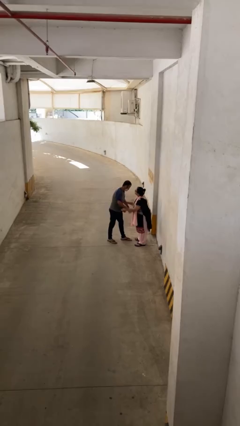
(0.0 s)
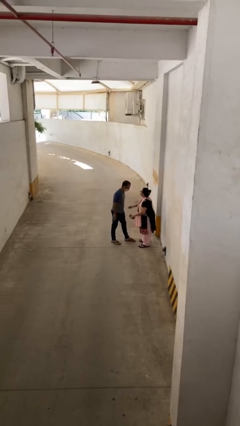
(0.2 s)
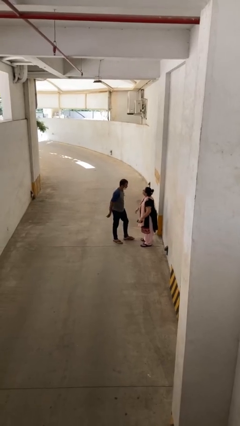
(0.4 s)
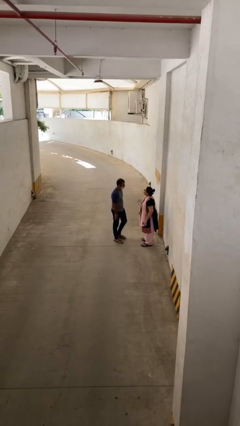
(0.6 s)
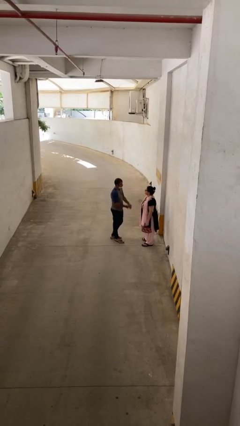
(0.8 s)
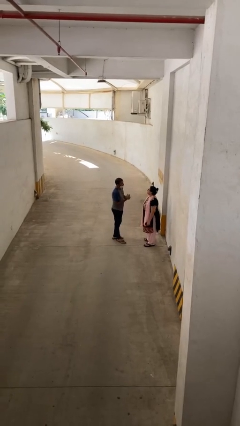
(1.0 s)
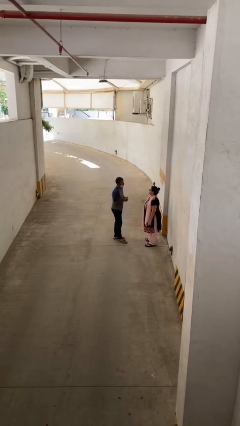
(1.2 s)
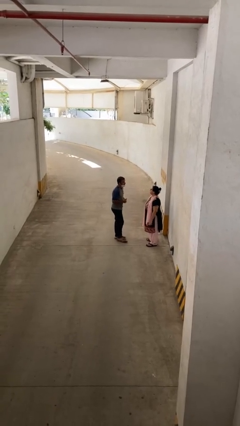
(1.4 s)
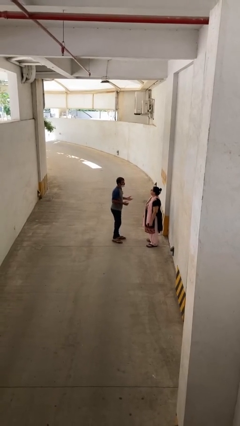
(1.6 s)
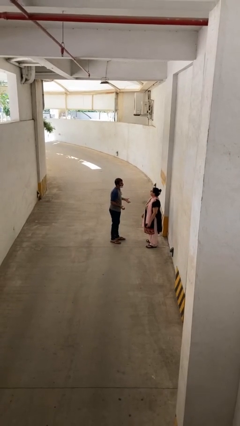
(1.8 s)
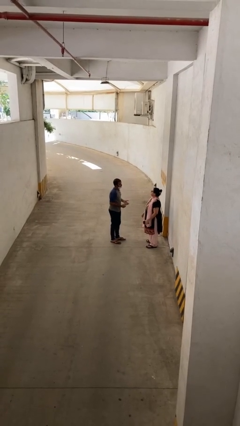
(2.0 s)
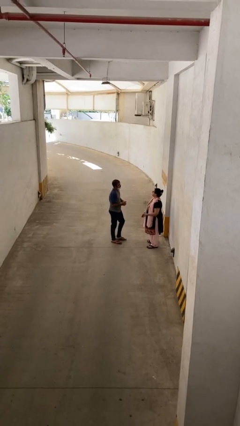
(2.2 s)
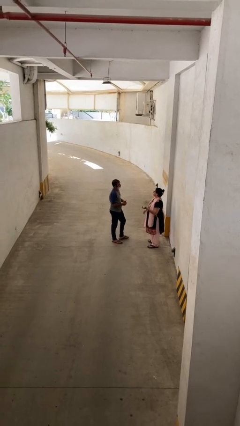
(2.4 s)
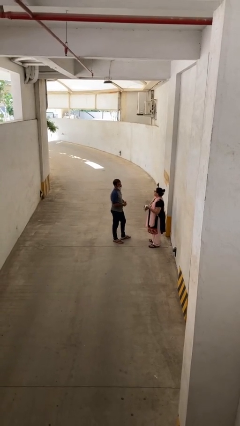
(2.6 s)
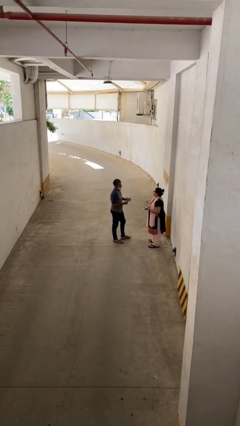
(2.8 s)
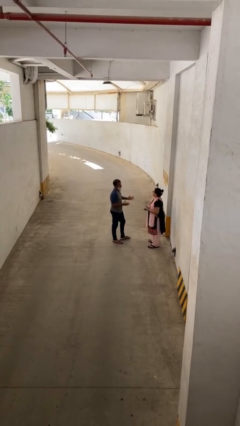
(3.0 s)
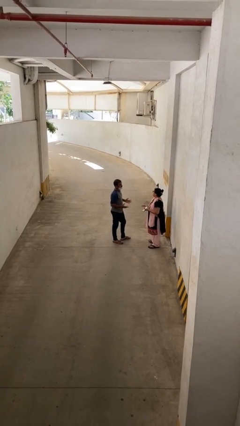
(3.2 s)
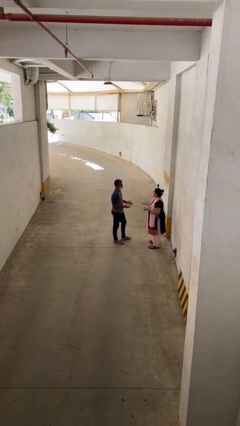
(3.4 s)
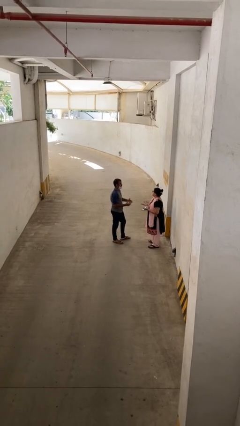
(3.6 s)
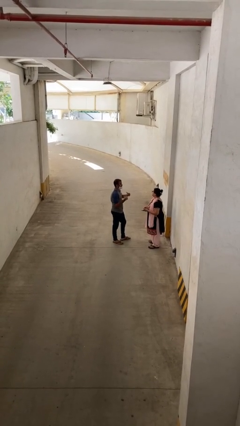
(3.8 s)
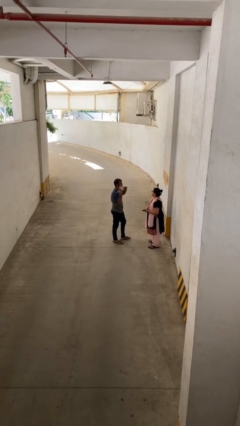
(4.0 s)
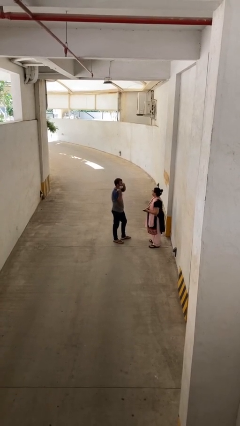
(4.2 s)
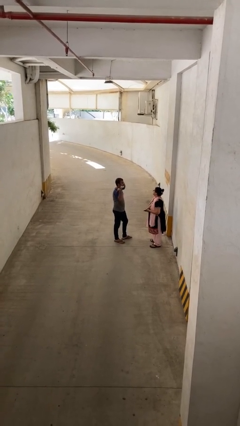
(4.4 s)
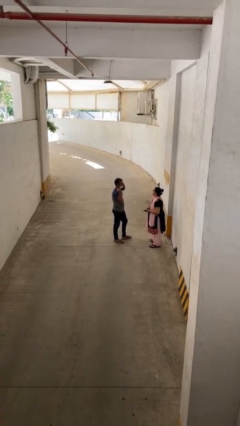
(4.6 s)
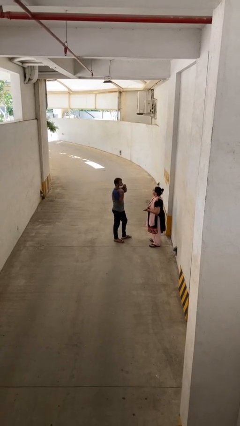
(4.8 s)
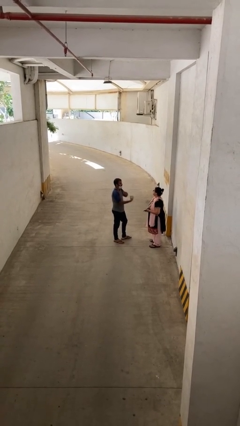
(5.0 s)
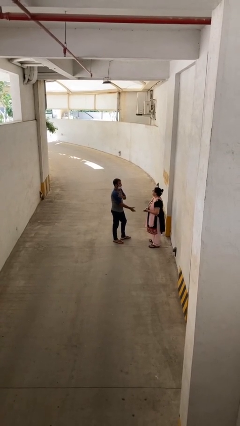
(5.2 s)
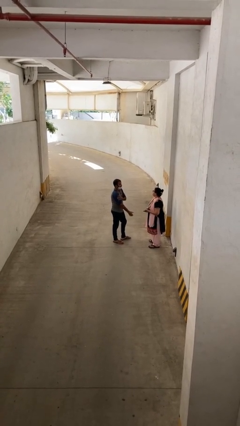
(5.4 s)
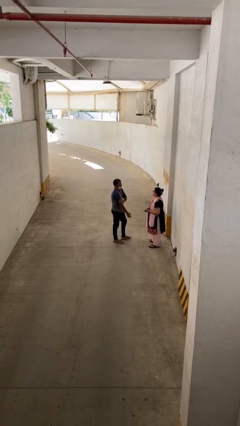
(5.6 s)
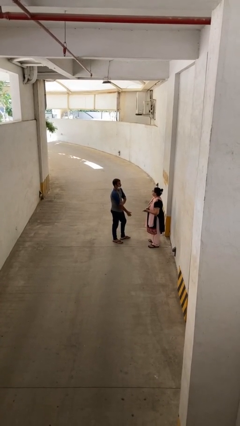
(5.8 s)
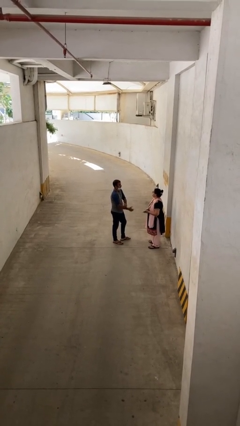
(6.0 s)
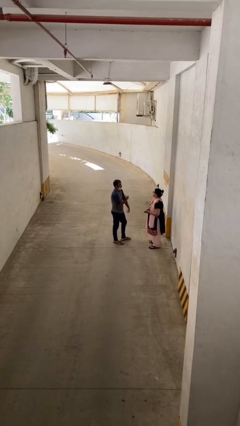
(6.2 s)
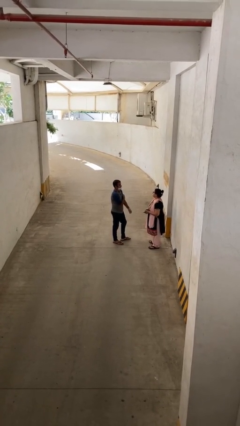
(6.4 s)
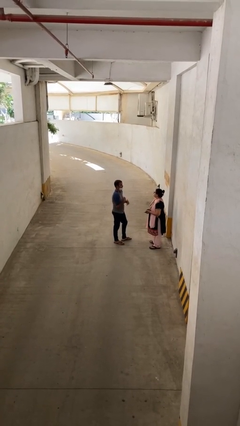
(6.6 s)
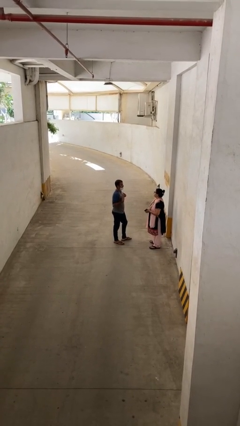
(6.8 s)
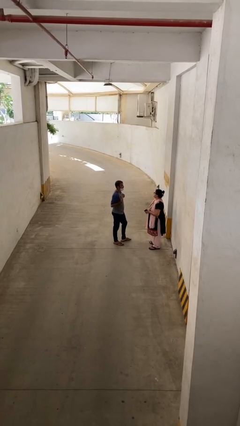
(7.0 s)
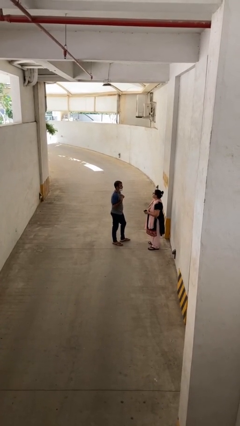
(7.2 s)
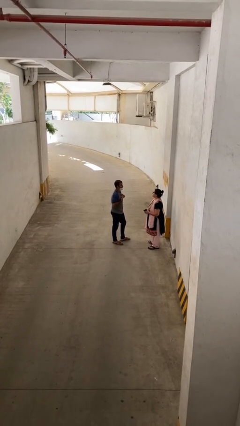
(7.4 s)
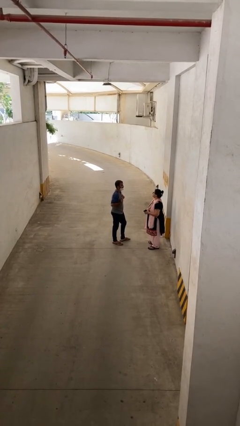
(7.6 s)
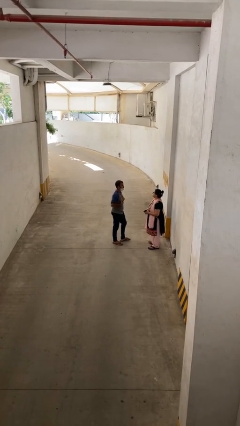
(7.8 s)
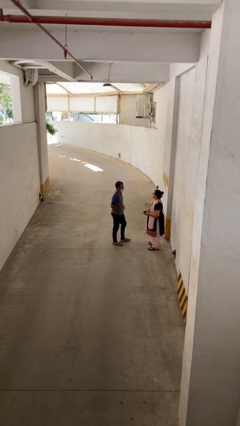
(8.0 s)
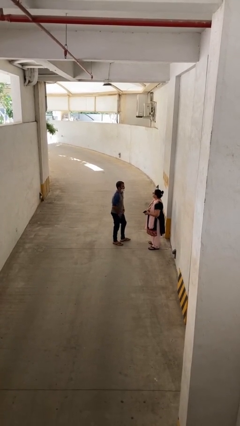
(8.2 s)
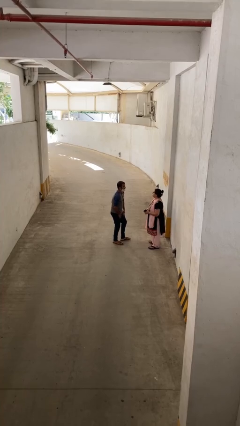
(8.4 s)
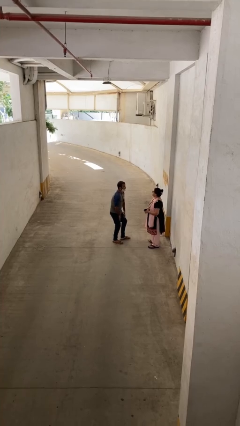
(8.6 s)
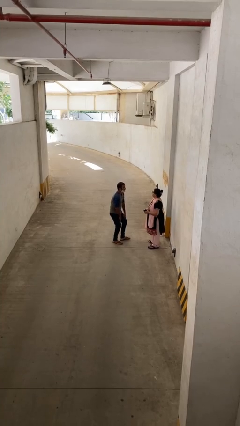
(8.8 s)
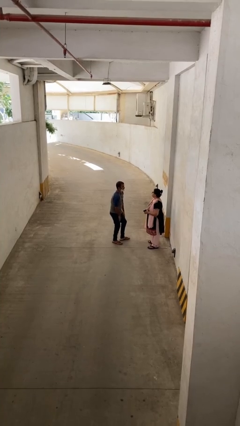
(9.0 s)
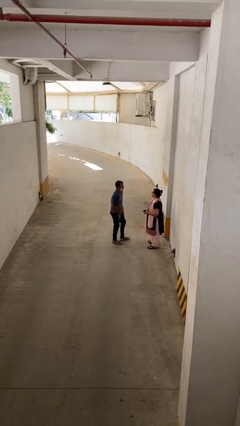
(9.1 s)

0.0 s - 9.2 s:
person talks to person

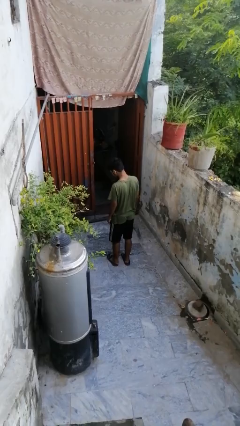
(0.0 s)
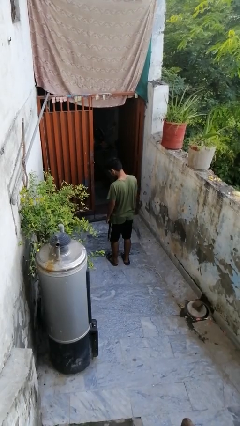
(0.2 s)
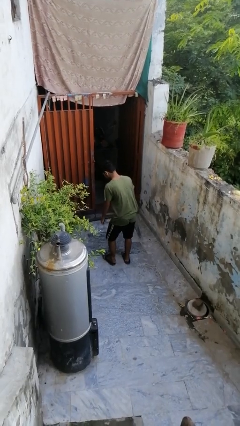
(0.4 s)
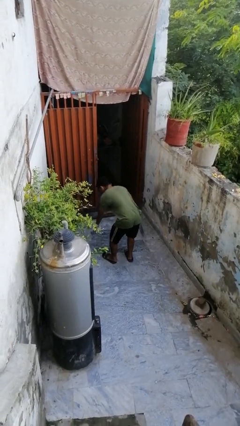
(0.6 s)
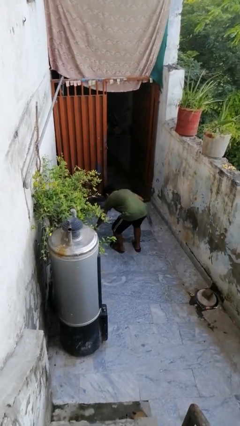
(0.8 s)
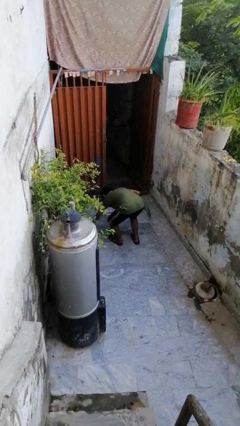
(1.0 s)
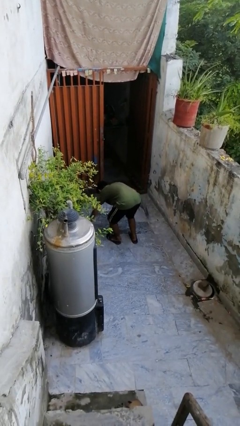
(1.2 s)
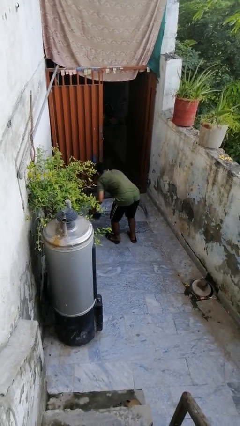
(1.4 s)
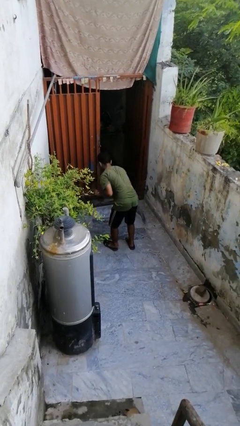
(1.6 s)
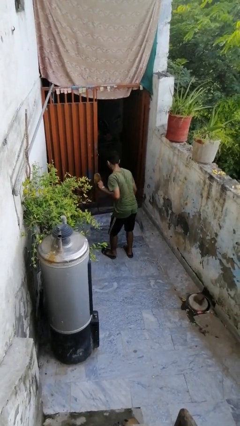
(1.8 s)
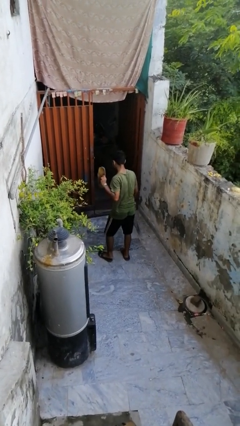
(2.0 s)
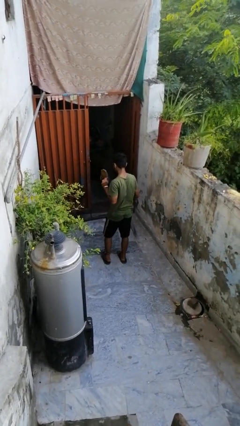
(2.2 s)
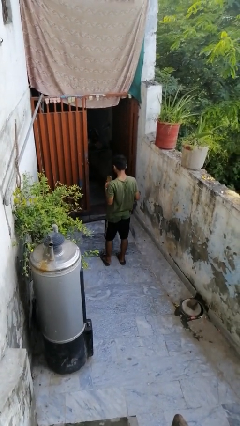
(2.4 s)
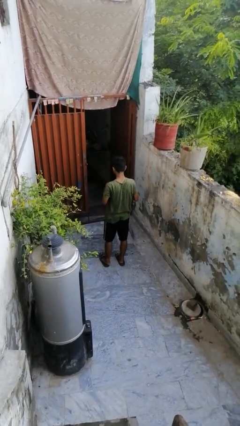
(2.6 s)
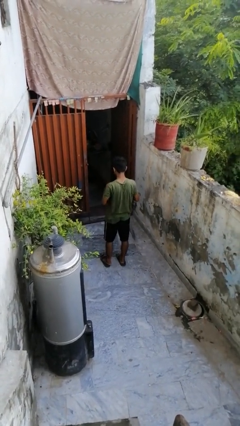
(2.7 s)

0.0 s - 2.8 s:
person picks up object from floor

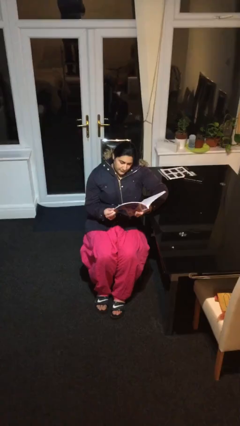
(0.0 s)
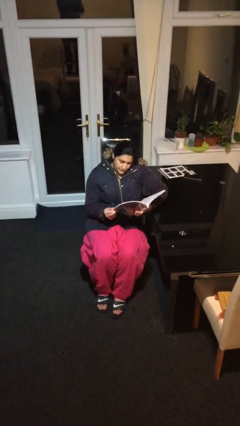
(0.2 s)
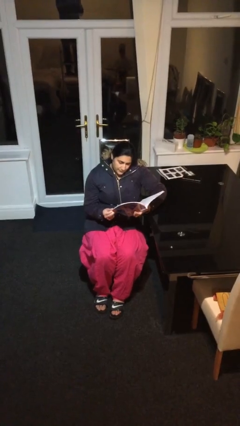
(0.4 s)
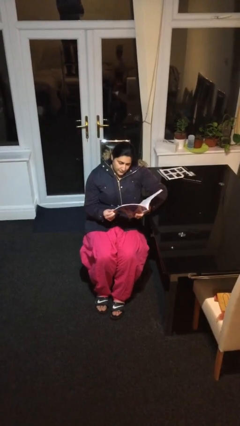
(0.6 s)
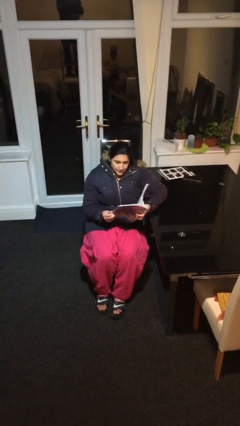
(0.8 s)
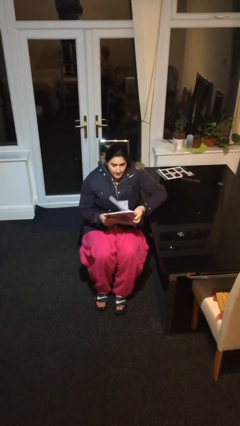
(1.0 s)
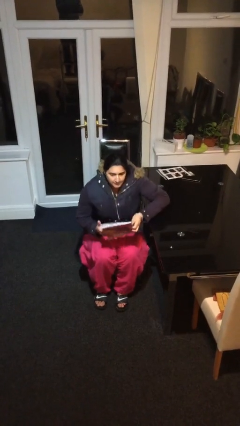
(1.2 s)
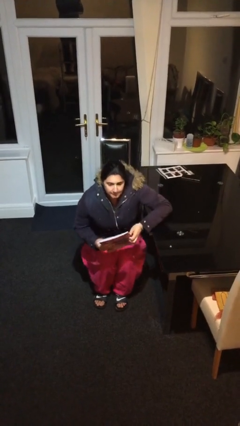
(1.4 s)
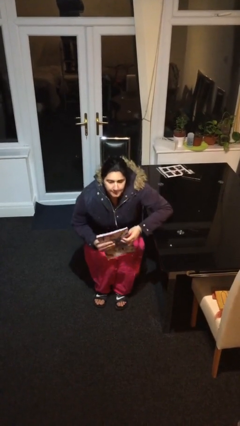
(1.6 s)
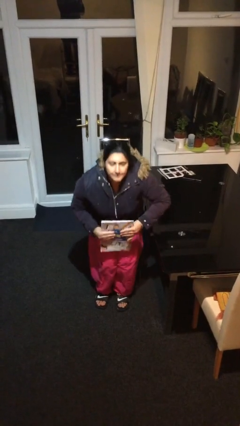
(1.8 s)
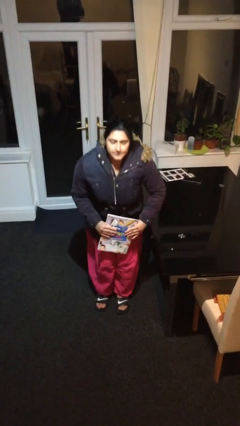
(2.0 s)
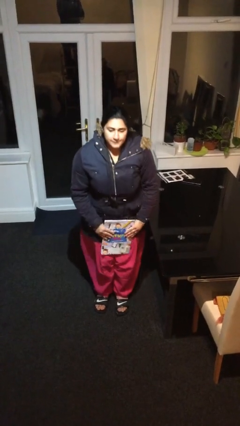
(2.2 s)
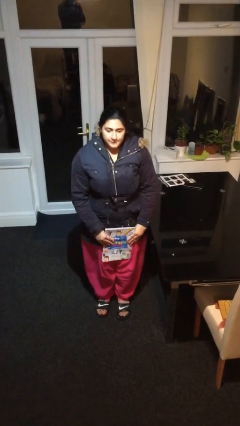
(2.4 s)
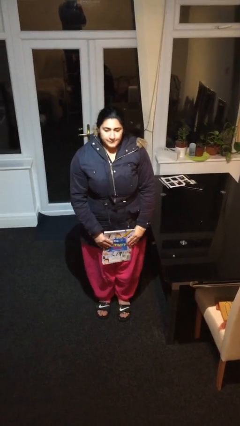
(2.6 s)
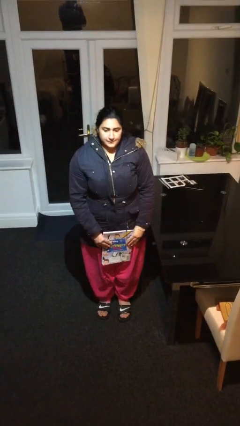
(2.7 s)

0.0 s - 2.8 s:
person stands up

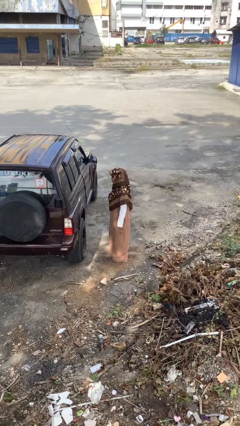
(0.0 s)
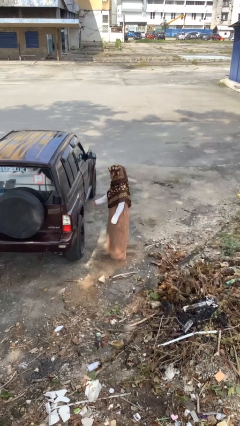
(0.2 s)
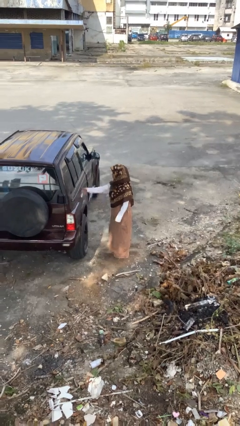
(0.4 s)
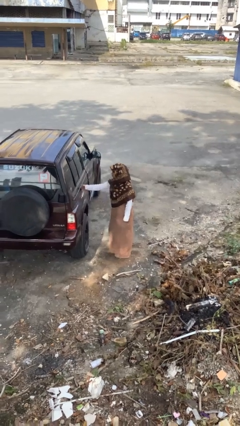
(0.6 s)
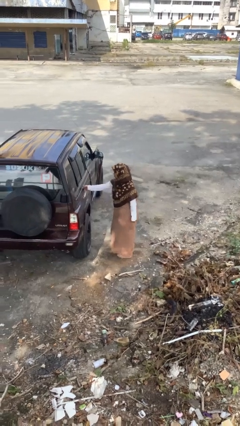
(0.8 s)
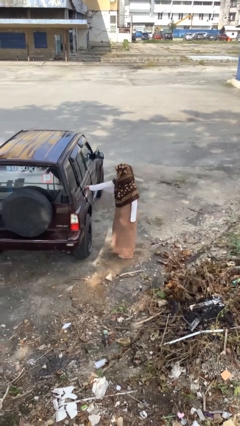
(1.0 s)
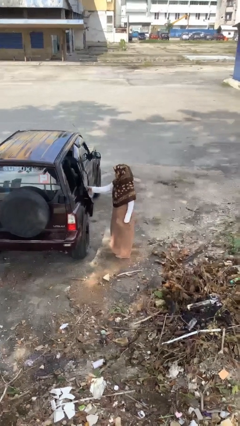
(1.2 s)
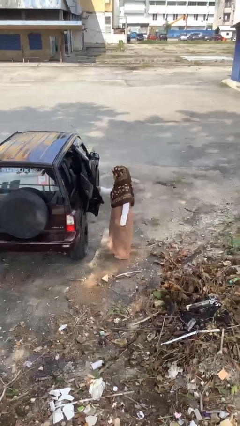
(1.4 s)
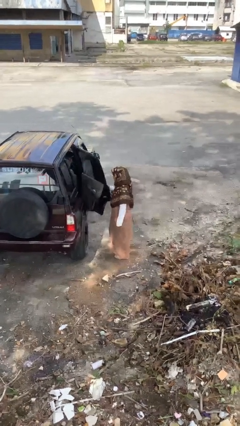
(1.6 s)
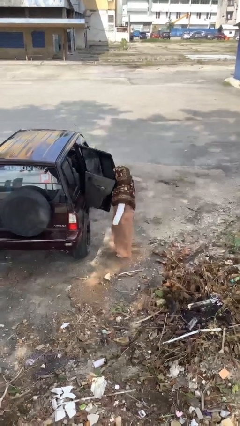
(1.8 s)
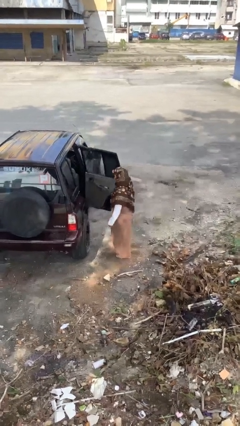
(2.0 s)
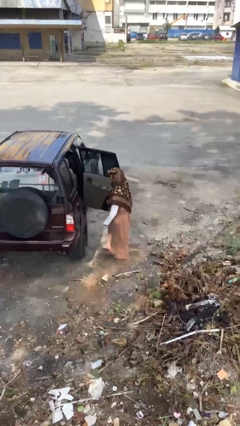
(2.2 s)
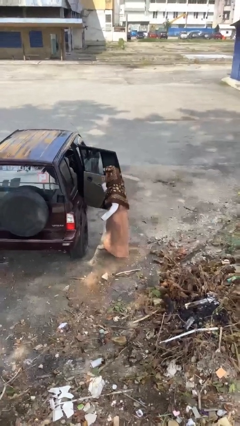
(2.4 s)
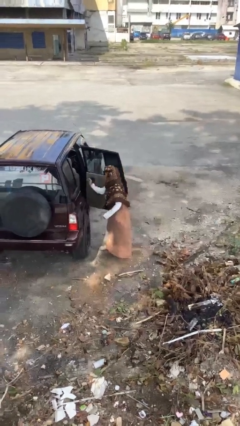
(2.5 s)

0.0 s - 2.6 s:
person opens car door

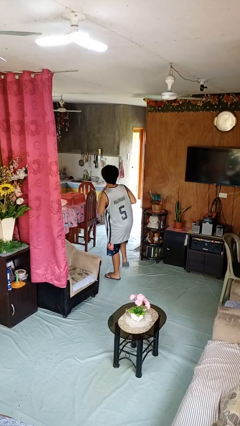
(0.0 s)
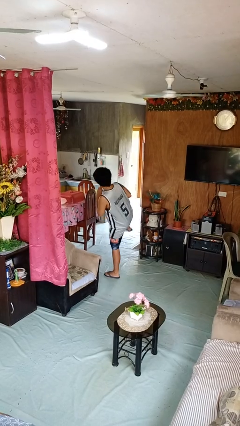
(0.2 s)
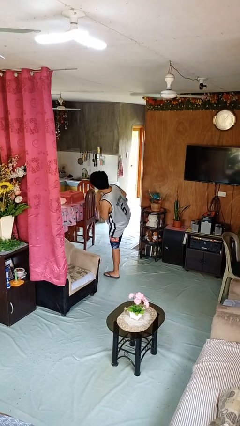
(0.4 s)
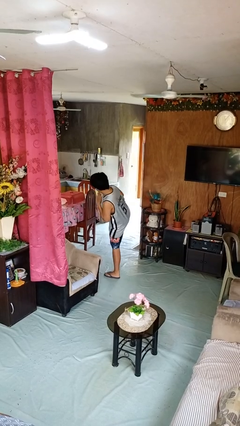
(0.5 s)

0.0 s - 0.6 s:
person karate kicks
